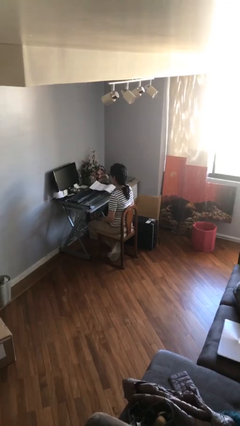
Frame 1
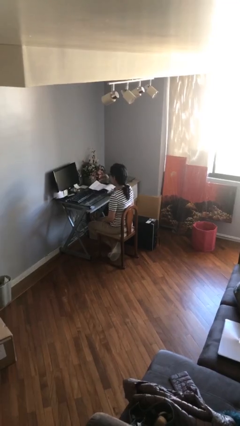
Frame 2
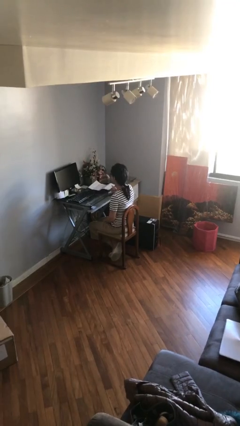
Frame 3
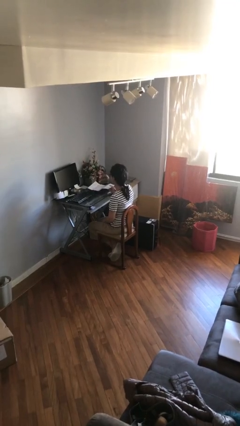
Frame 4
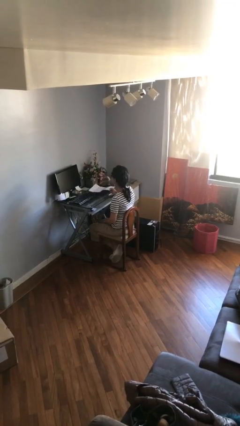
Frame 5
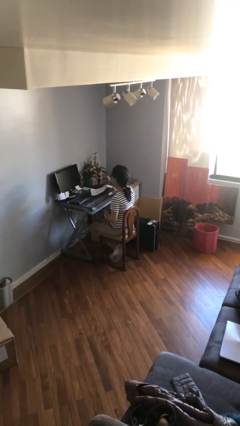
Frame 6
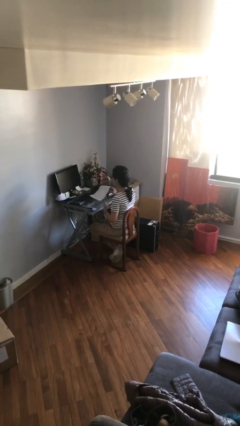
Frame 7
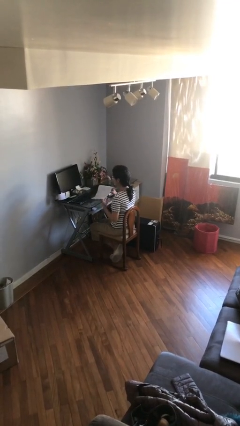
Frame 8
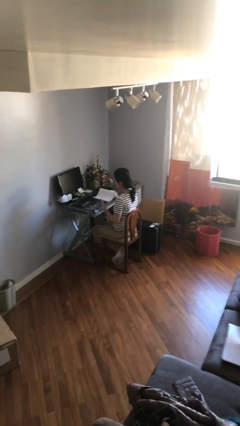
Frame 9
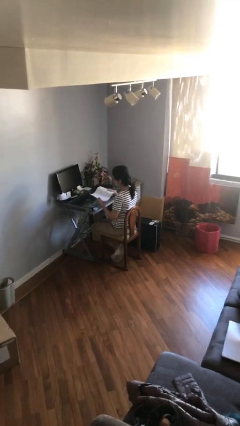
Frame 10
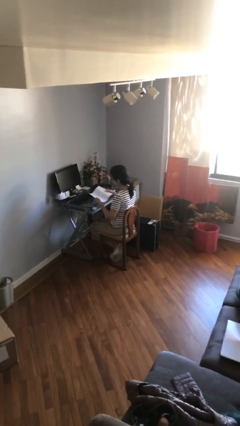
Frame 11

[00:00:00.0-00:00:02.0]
person picks up object from table

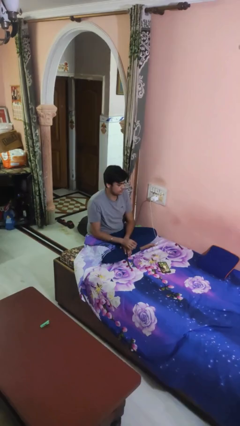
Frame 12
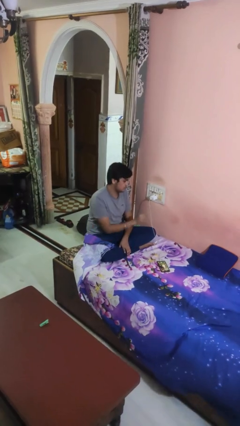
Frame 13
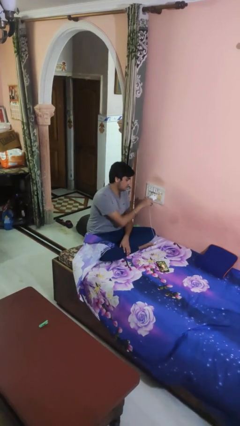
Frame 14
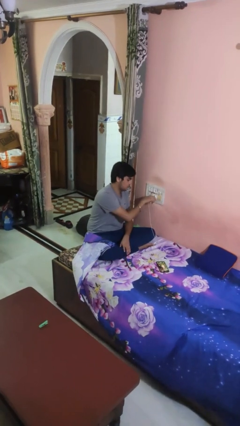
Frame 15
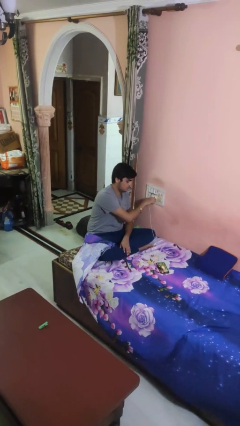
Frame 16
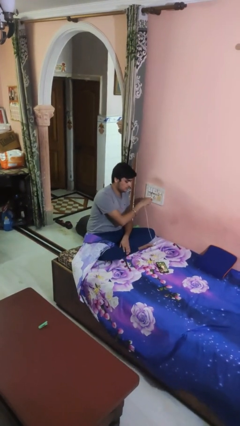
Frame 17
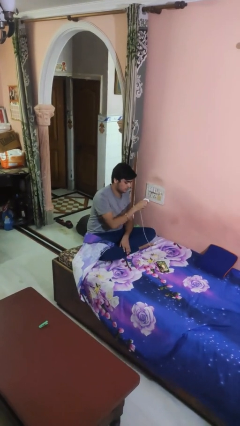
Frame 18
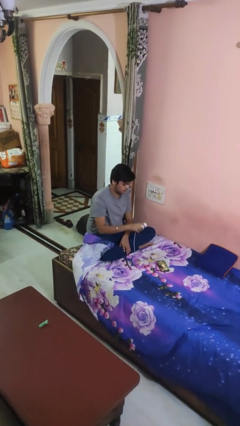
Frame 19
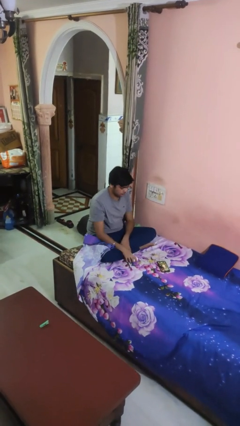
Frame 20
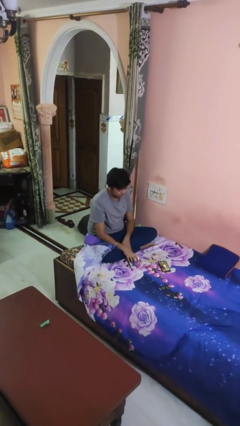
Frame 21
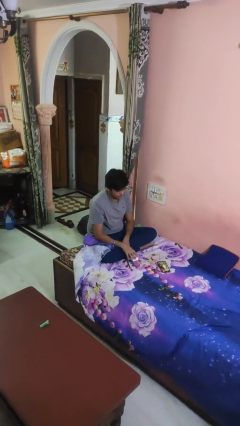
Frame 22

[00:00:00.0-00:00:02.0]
person unplugs from electrical socket

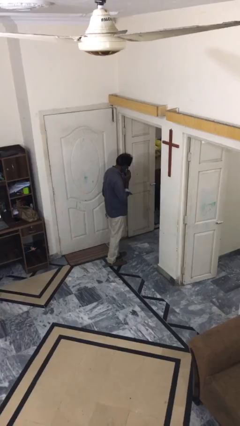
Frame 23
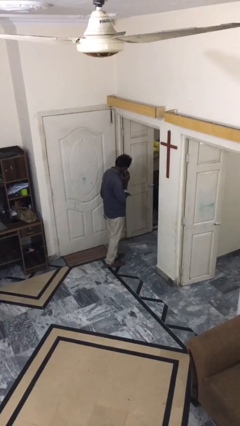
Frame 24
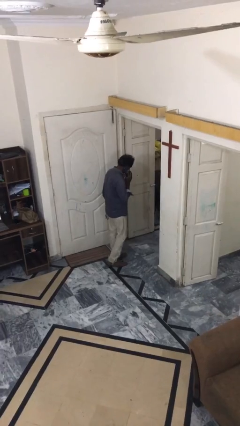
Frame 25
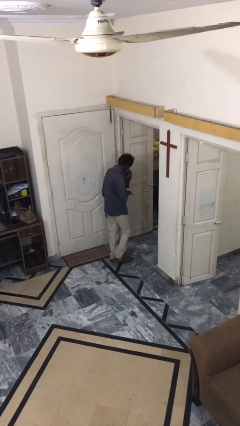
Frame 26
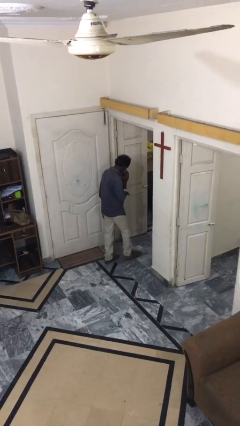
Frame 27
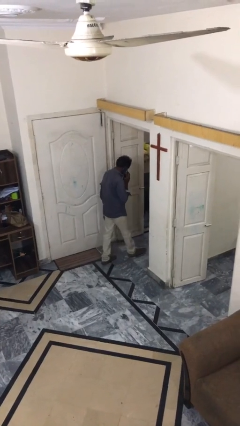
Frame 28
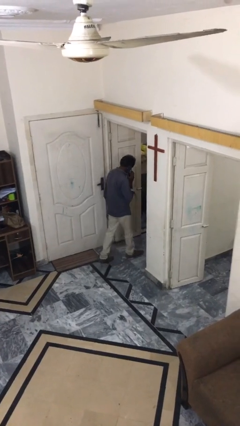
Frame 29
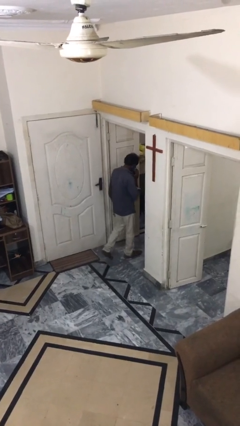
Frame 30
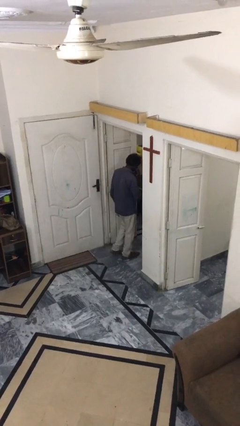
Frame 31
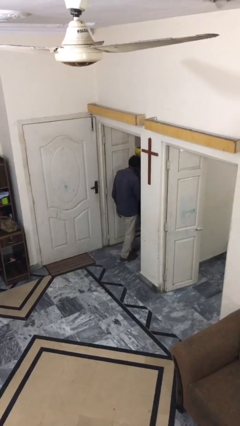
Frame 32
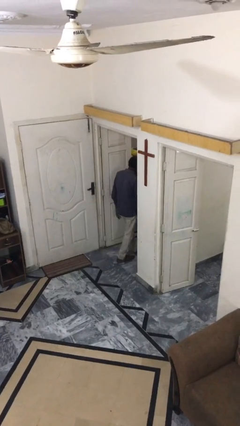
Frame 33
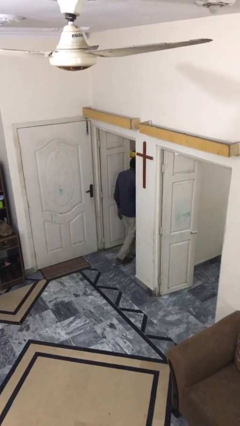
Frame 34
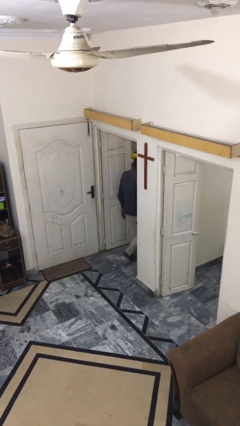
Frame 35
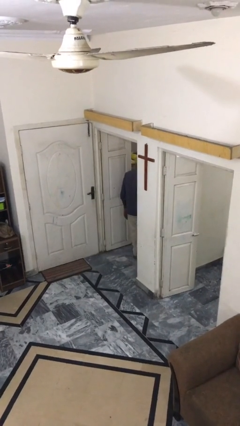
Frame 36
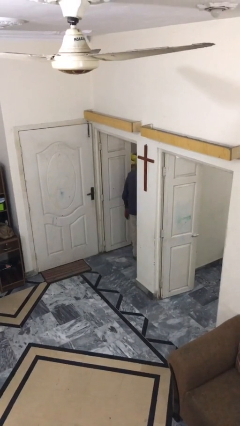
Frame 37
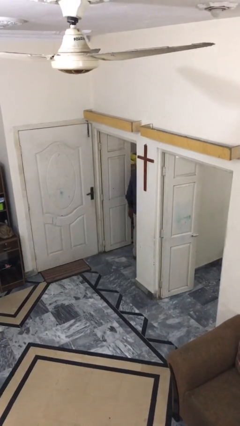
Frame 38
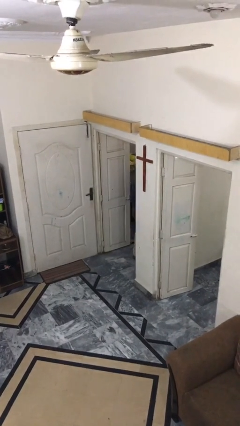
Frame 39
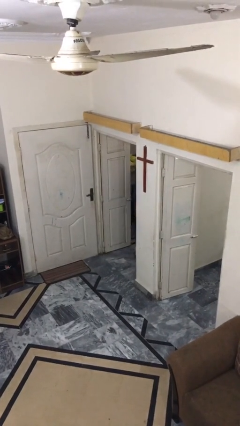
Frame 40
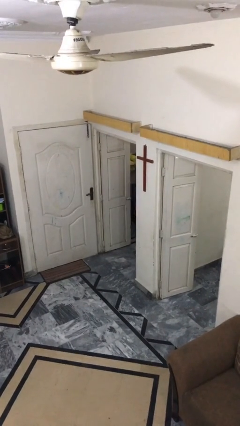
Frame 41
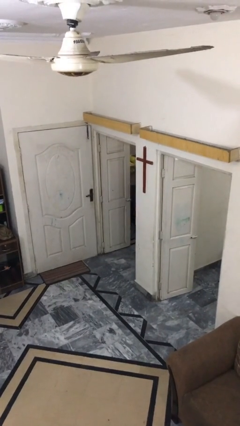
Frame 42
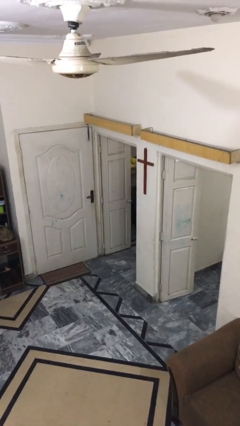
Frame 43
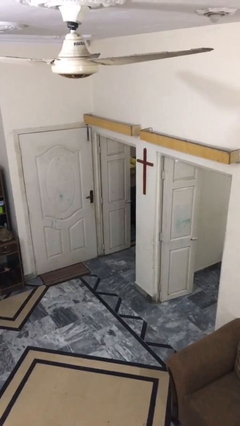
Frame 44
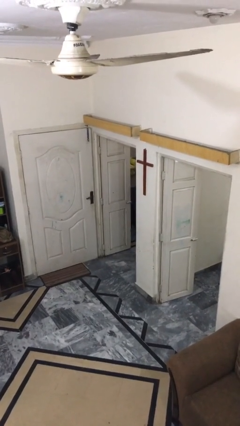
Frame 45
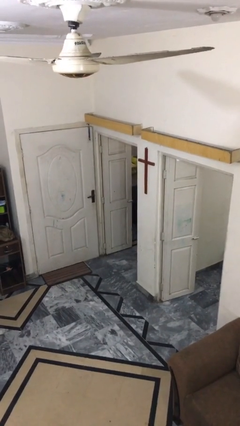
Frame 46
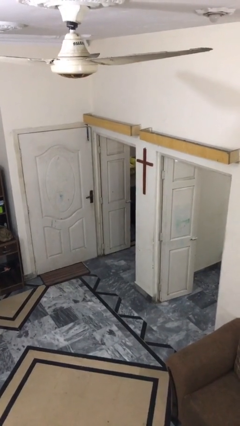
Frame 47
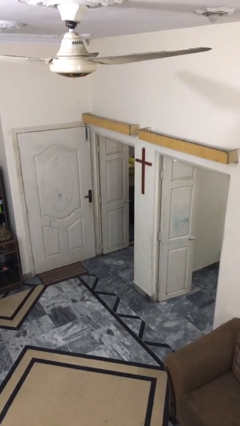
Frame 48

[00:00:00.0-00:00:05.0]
person exits scene through structure

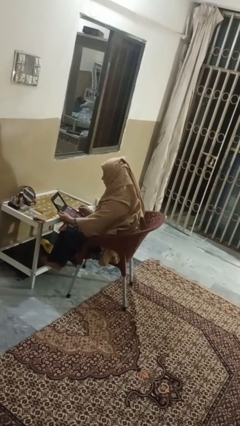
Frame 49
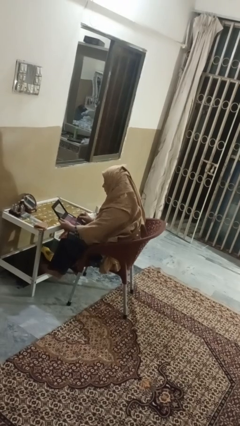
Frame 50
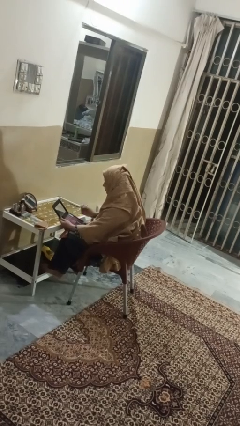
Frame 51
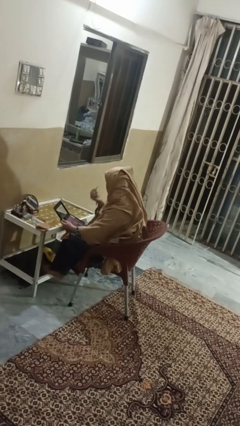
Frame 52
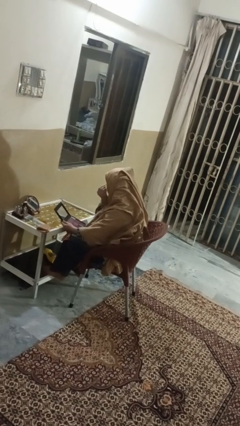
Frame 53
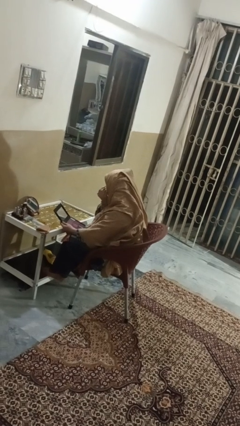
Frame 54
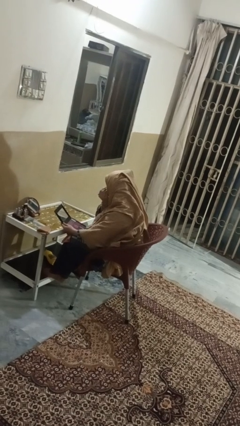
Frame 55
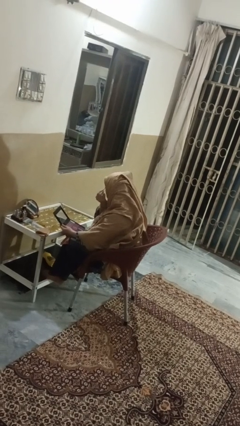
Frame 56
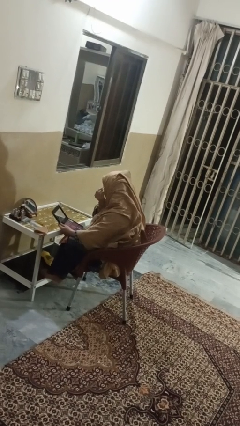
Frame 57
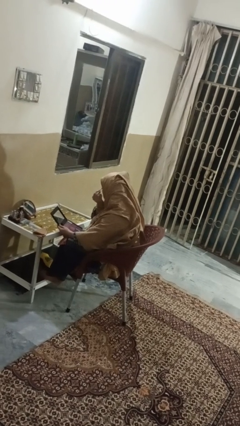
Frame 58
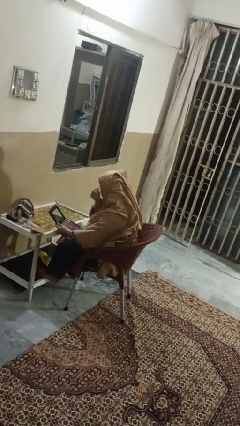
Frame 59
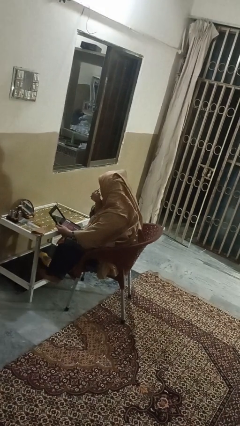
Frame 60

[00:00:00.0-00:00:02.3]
person applies eye makeup

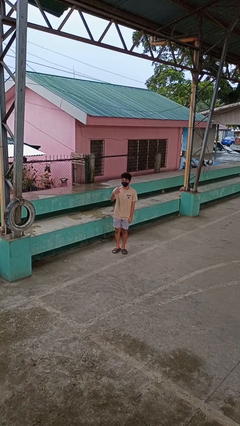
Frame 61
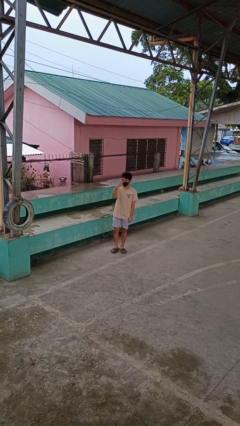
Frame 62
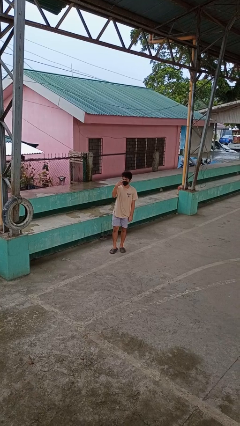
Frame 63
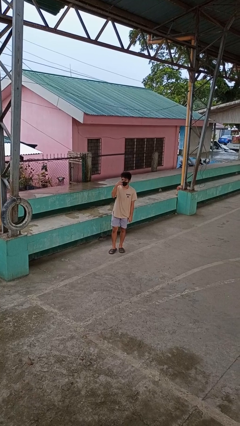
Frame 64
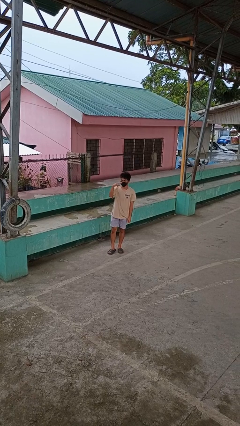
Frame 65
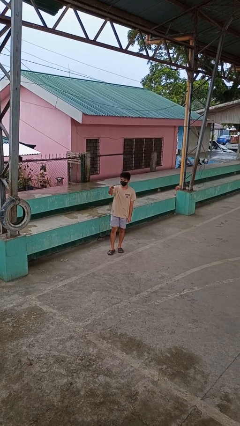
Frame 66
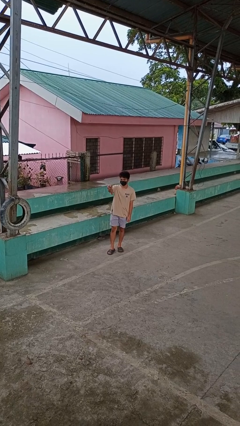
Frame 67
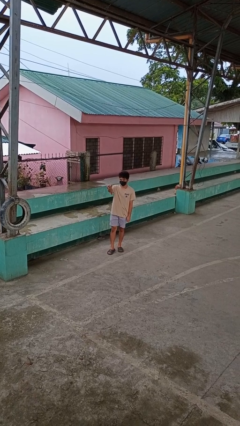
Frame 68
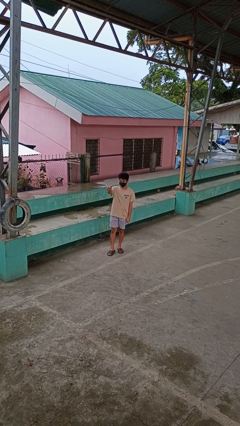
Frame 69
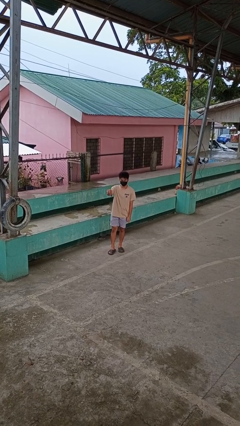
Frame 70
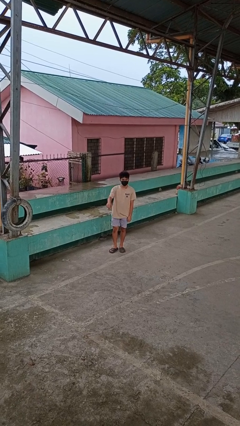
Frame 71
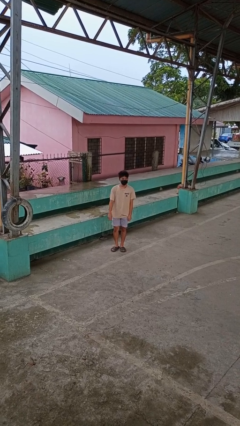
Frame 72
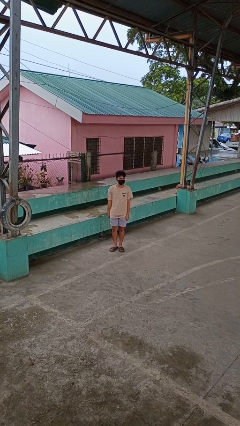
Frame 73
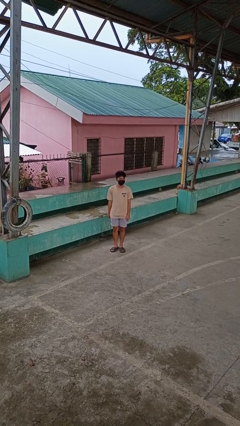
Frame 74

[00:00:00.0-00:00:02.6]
person gestures watch closely

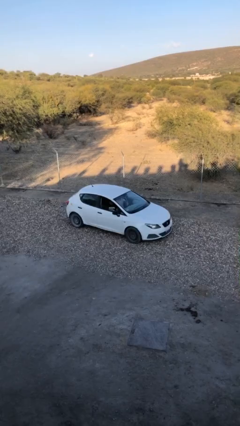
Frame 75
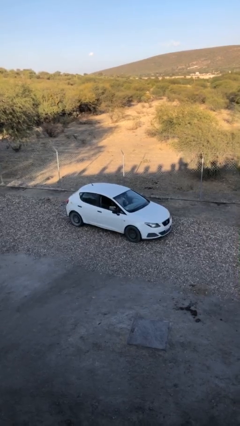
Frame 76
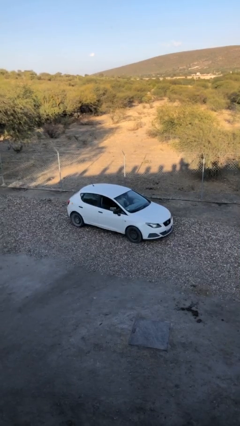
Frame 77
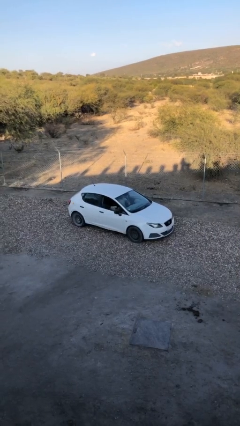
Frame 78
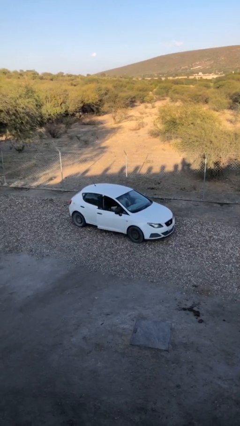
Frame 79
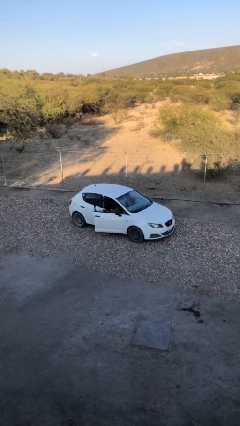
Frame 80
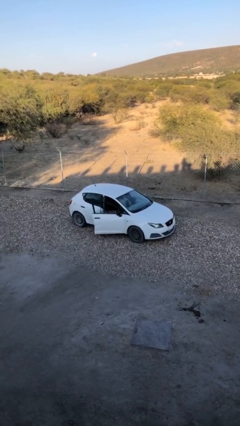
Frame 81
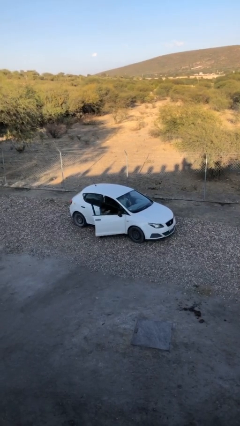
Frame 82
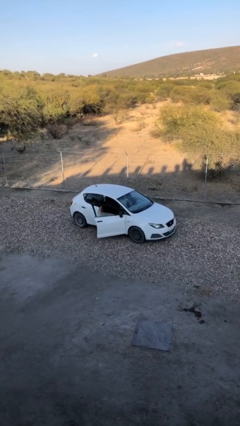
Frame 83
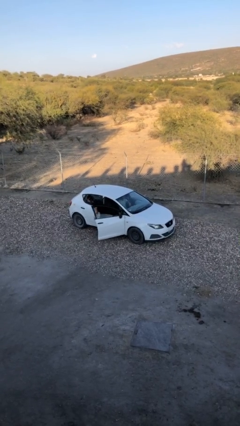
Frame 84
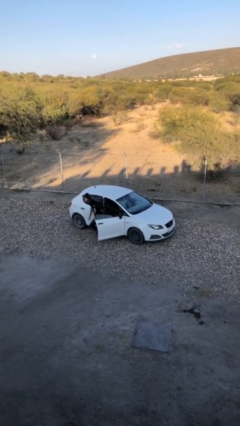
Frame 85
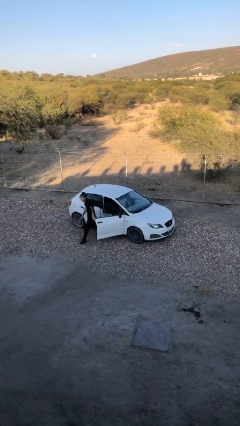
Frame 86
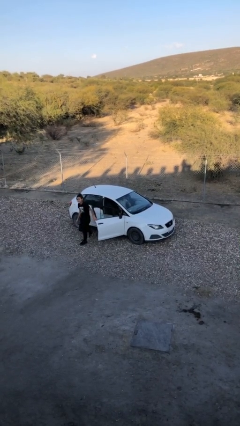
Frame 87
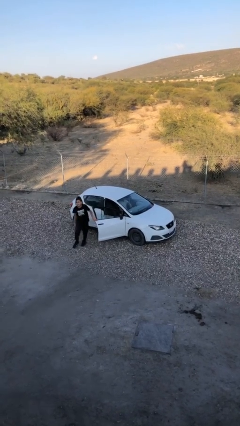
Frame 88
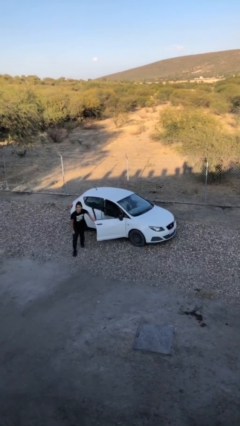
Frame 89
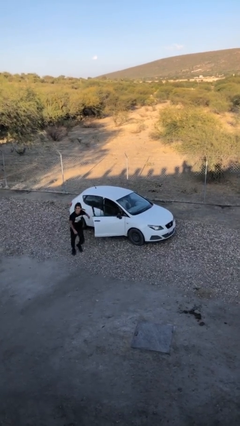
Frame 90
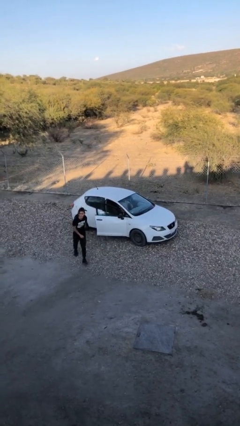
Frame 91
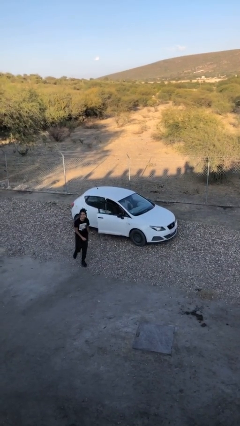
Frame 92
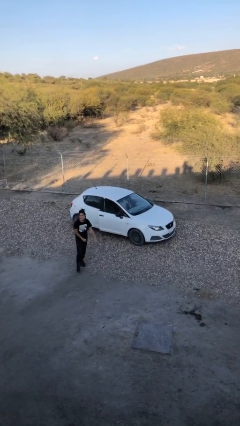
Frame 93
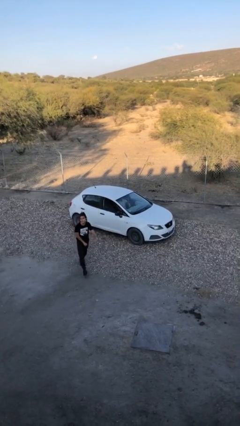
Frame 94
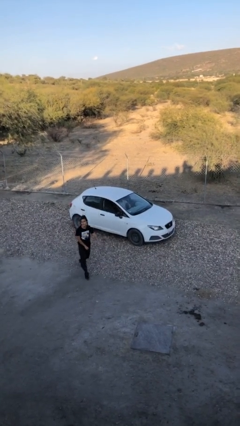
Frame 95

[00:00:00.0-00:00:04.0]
car drops off person
